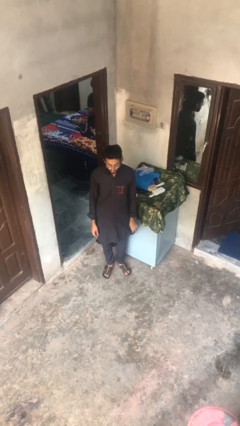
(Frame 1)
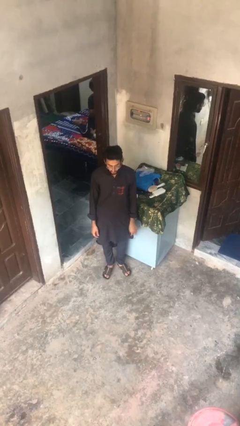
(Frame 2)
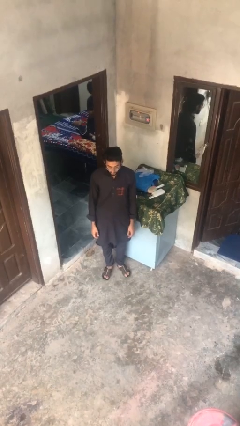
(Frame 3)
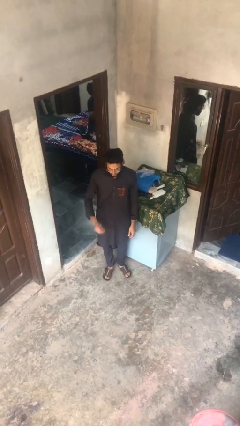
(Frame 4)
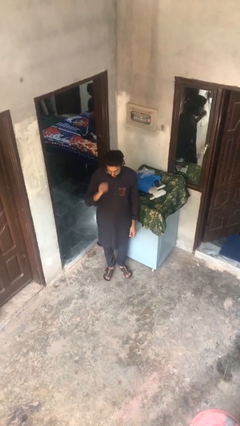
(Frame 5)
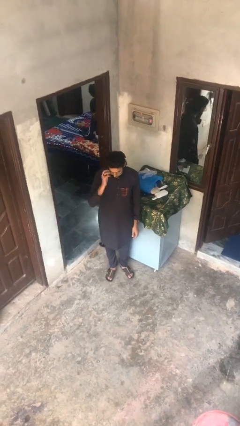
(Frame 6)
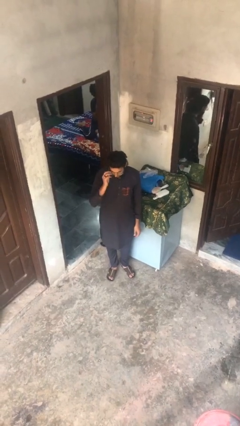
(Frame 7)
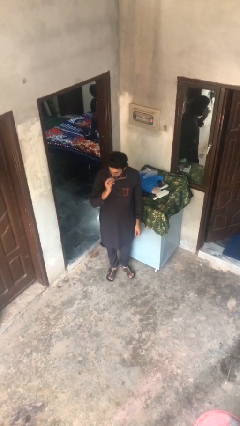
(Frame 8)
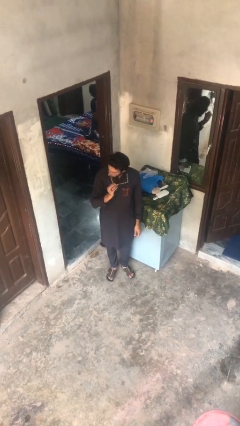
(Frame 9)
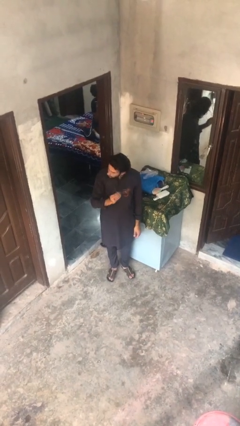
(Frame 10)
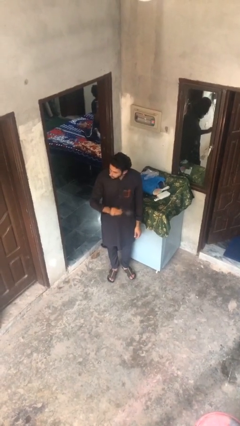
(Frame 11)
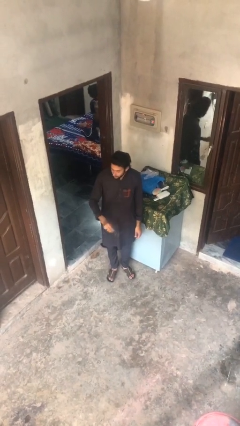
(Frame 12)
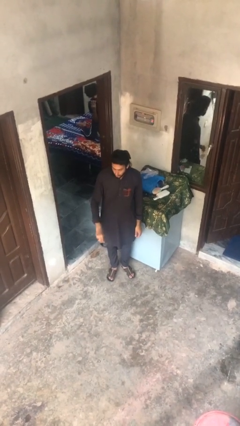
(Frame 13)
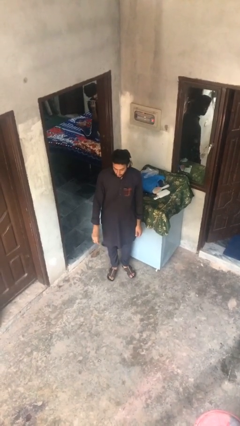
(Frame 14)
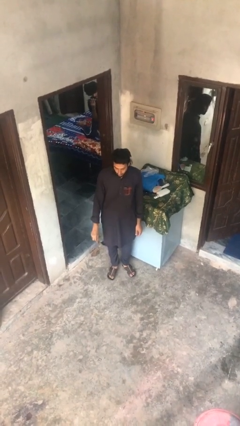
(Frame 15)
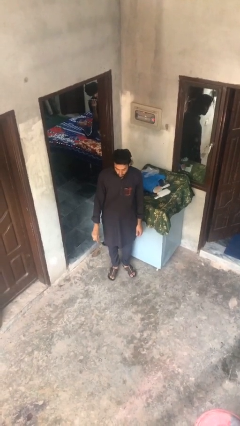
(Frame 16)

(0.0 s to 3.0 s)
person takes off glasses

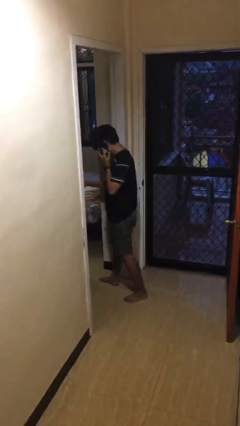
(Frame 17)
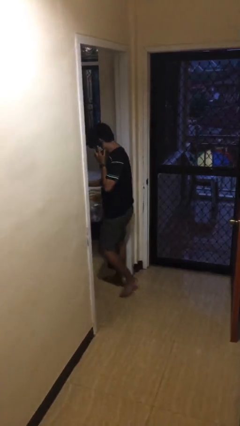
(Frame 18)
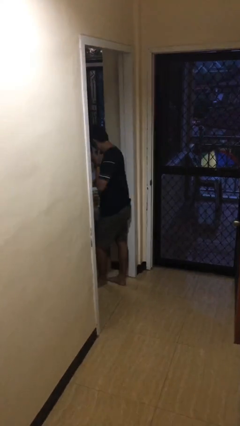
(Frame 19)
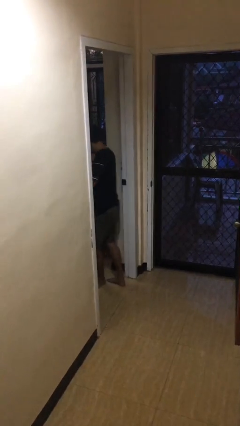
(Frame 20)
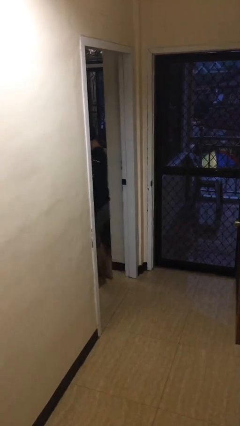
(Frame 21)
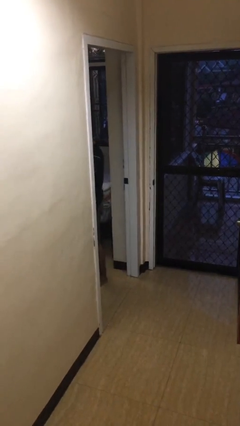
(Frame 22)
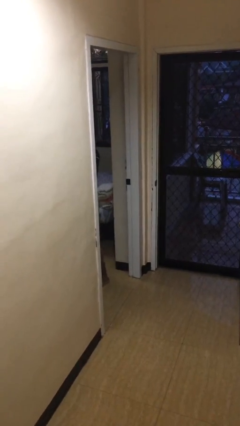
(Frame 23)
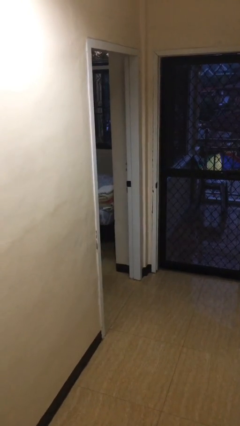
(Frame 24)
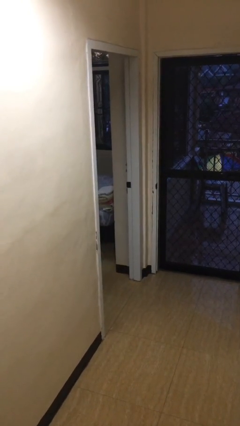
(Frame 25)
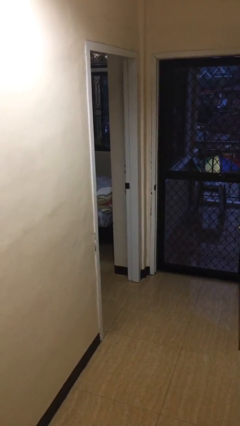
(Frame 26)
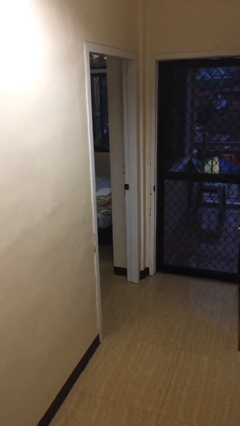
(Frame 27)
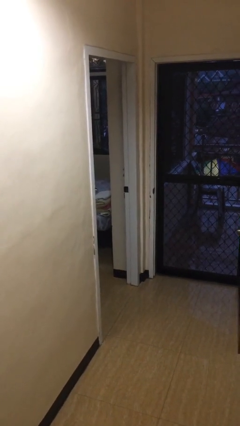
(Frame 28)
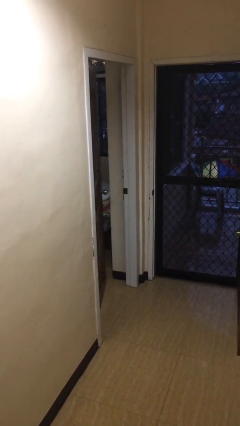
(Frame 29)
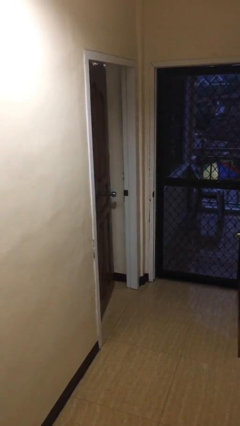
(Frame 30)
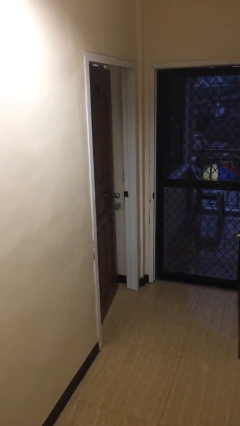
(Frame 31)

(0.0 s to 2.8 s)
person exits scene through structure

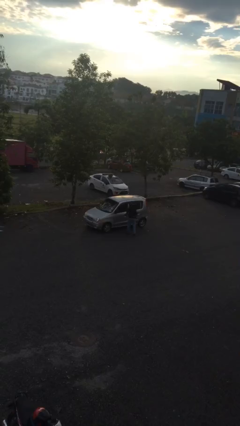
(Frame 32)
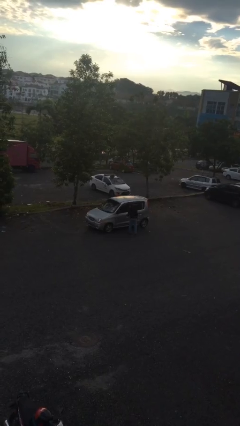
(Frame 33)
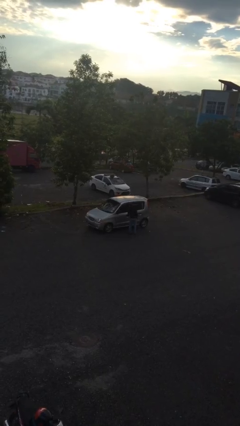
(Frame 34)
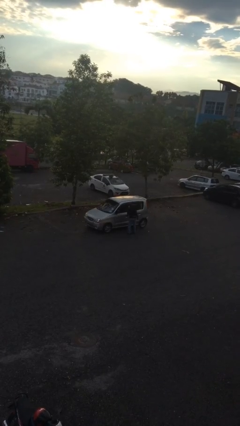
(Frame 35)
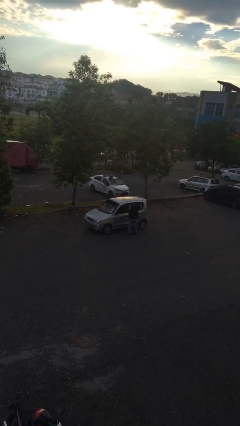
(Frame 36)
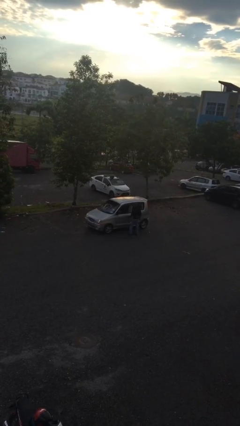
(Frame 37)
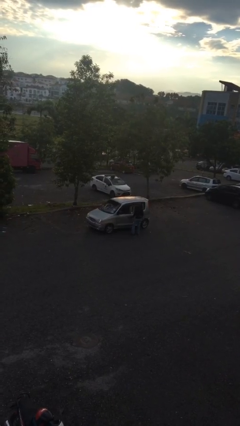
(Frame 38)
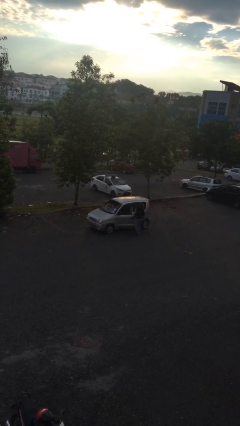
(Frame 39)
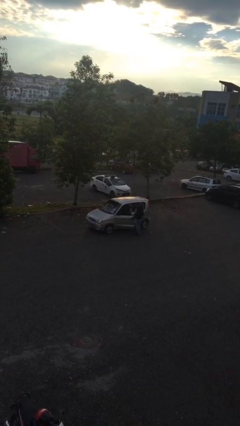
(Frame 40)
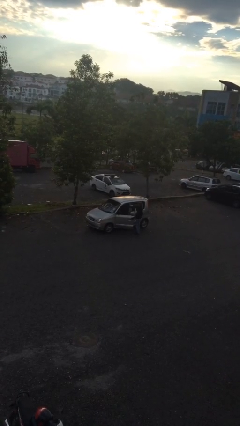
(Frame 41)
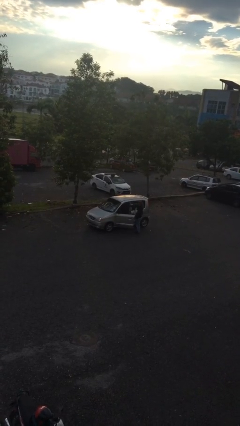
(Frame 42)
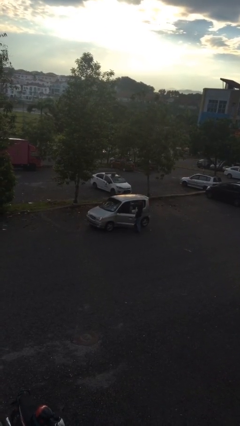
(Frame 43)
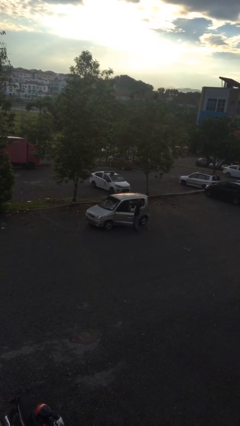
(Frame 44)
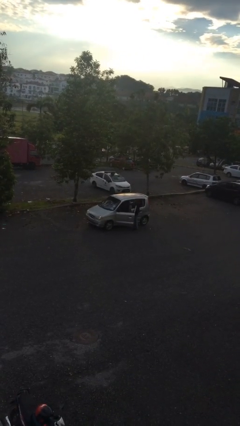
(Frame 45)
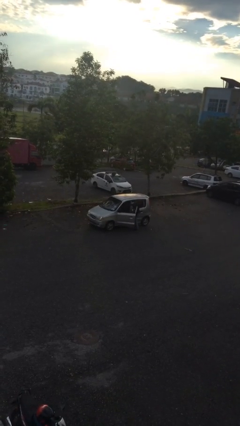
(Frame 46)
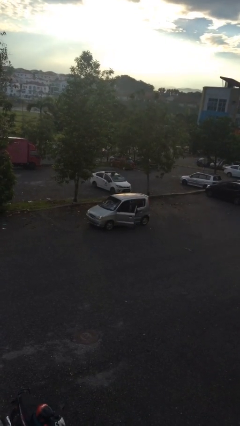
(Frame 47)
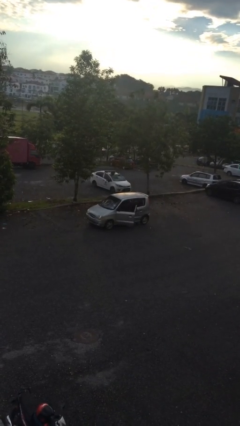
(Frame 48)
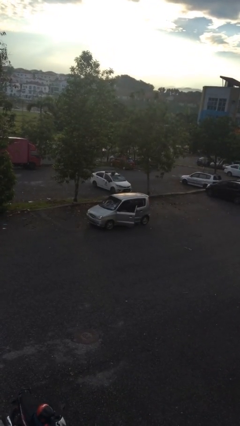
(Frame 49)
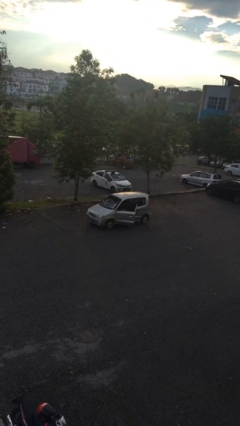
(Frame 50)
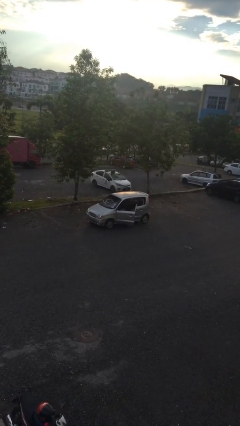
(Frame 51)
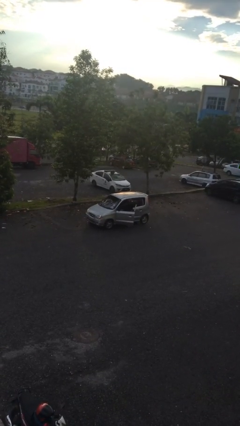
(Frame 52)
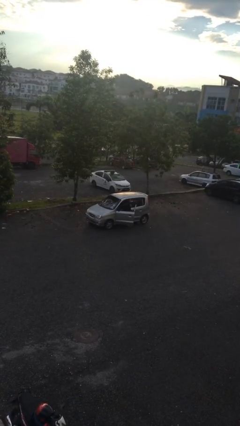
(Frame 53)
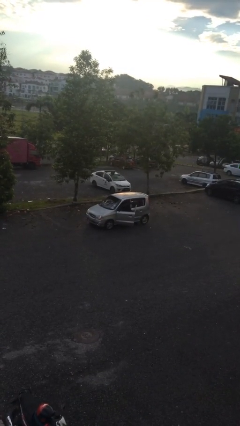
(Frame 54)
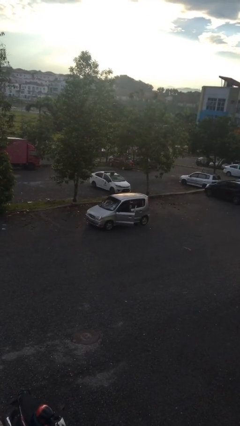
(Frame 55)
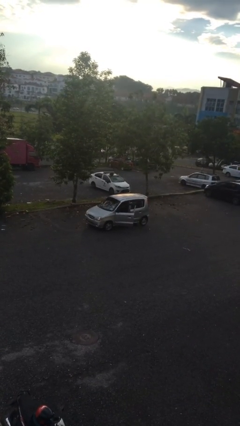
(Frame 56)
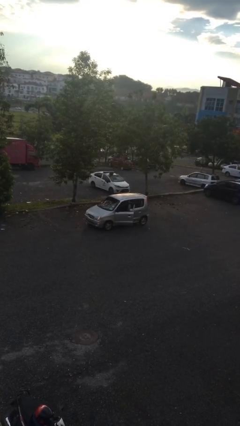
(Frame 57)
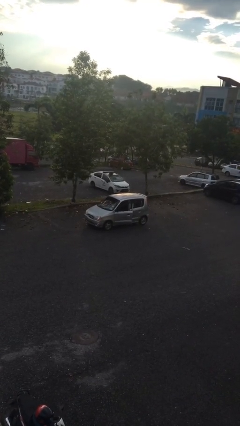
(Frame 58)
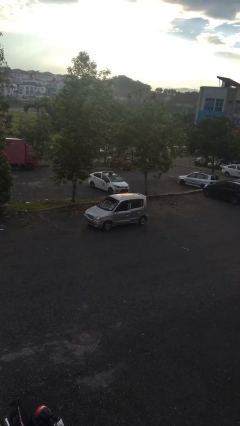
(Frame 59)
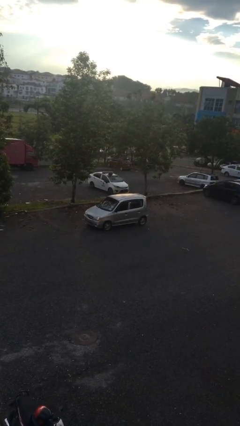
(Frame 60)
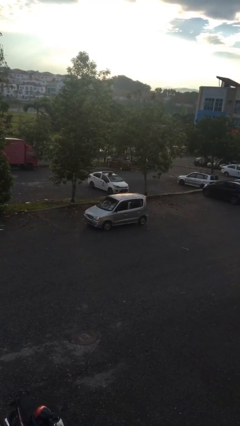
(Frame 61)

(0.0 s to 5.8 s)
car picks up person

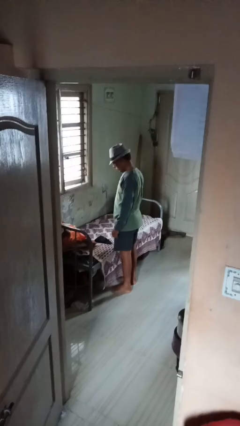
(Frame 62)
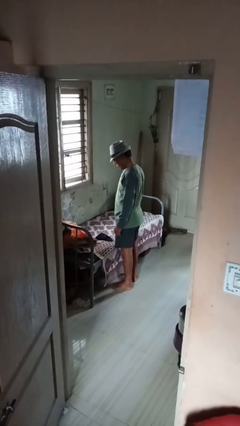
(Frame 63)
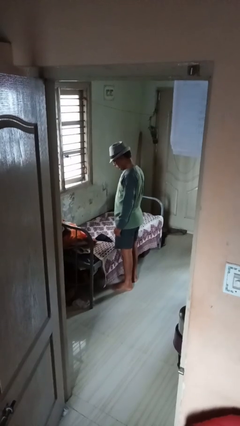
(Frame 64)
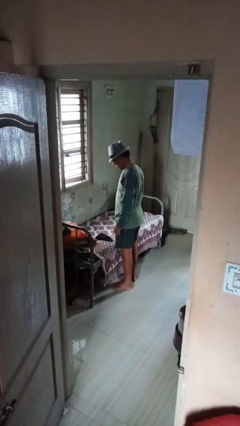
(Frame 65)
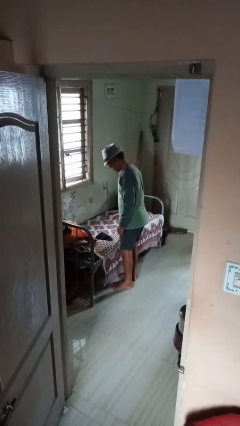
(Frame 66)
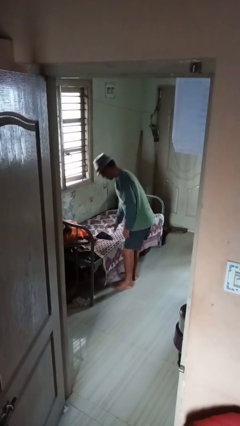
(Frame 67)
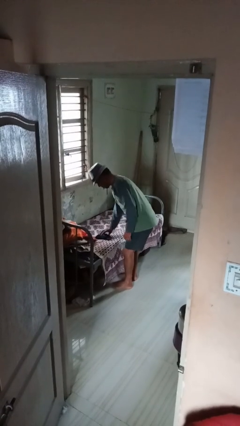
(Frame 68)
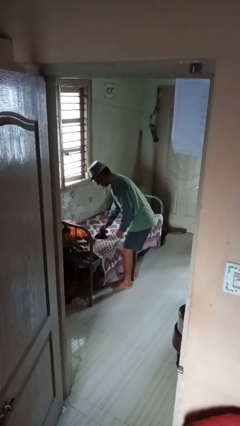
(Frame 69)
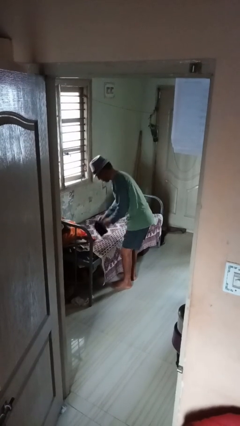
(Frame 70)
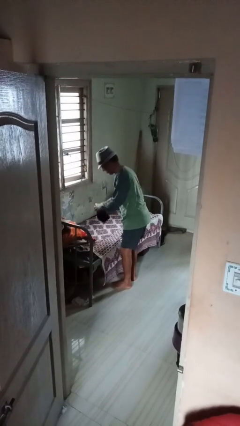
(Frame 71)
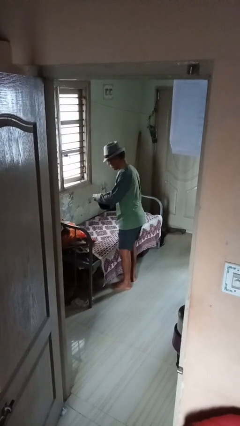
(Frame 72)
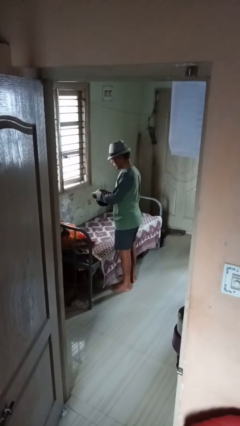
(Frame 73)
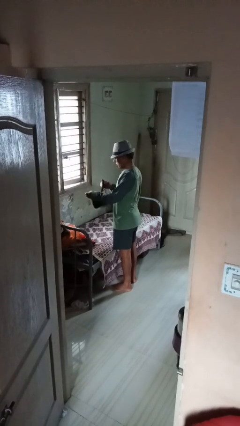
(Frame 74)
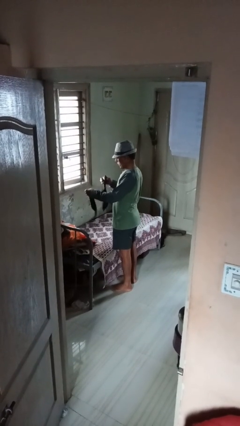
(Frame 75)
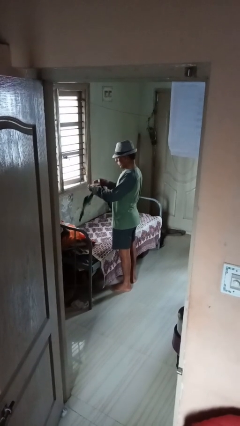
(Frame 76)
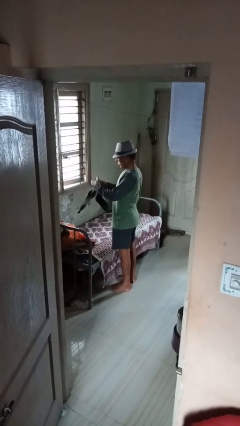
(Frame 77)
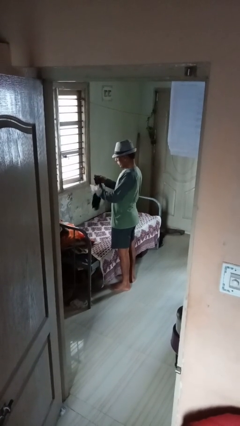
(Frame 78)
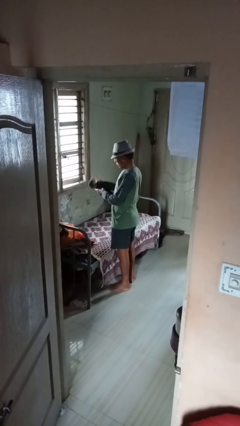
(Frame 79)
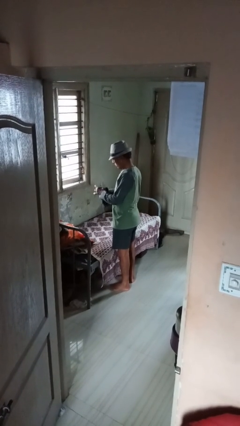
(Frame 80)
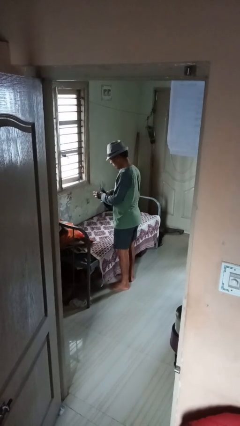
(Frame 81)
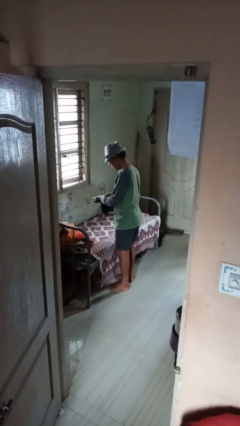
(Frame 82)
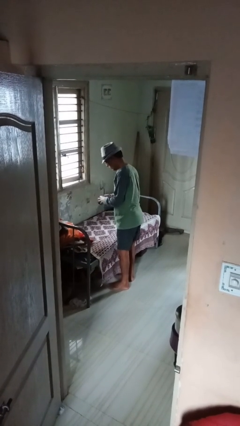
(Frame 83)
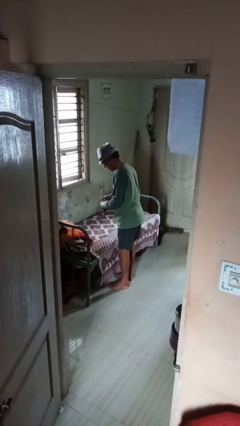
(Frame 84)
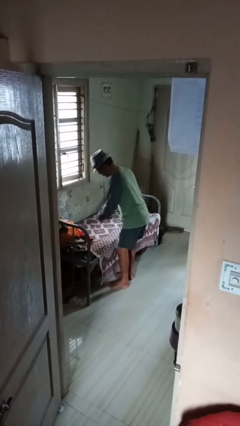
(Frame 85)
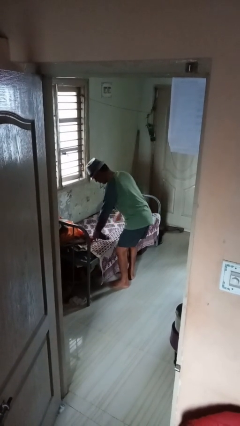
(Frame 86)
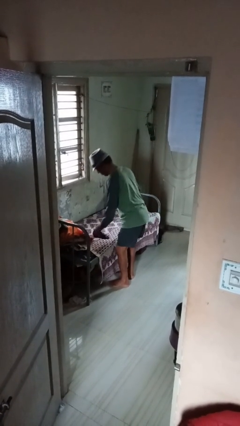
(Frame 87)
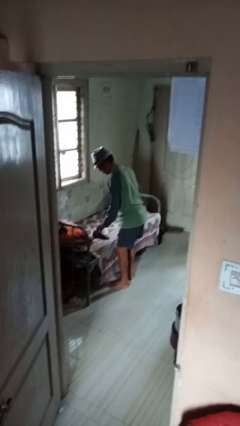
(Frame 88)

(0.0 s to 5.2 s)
person folds socks

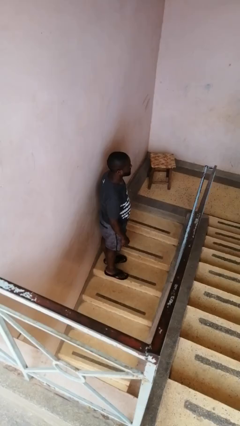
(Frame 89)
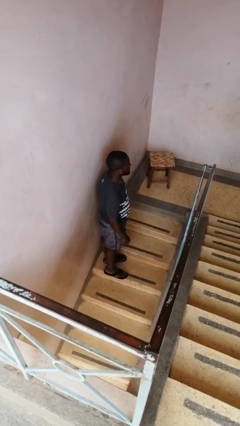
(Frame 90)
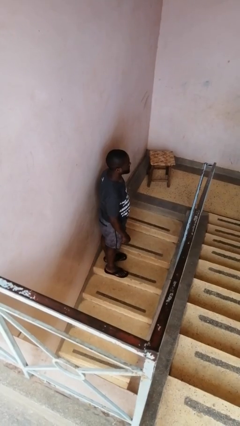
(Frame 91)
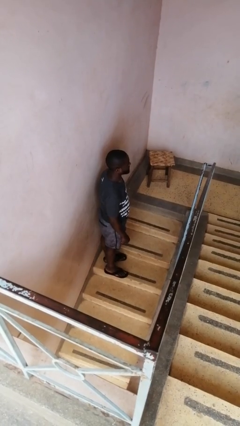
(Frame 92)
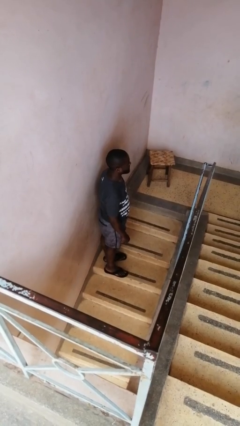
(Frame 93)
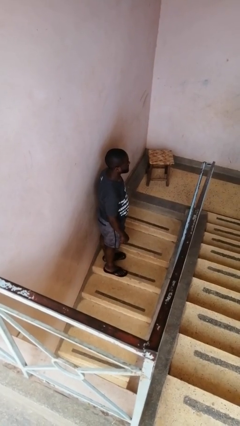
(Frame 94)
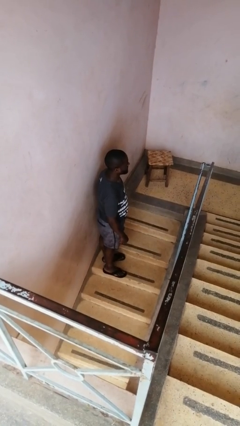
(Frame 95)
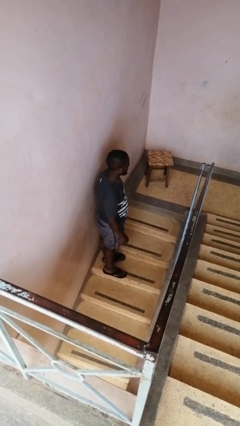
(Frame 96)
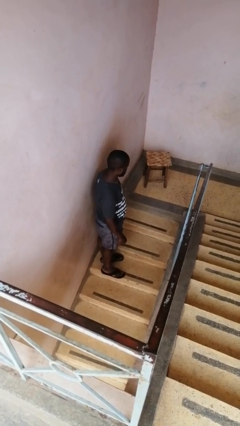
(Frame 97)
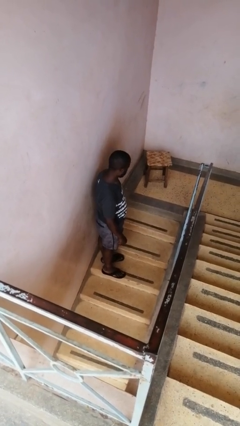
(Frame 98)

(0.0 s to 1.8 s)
person gestures blow kiss
